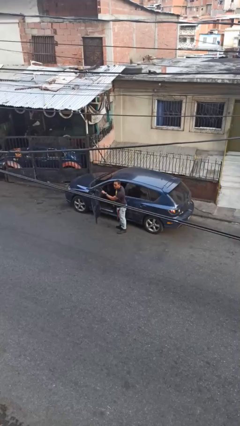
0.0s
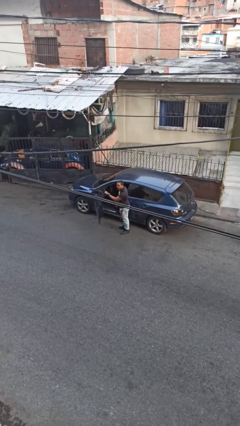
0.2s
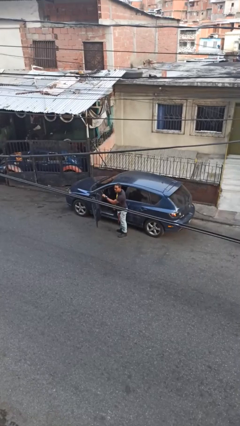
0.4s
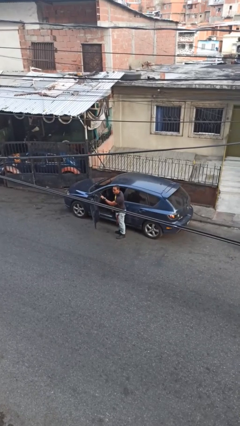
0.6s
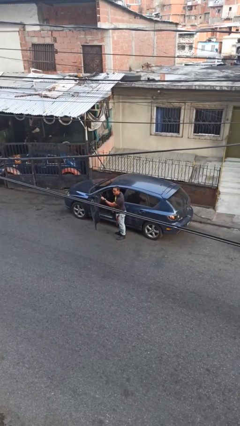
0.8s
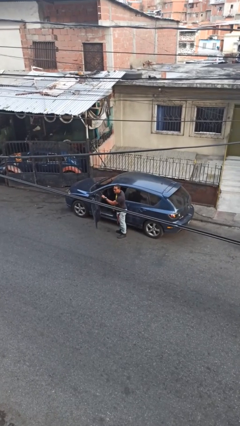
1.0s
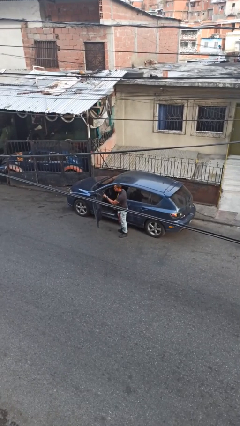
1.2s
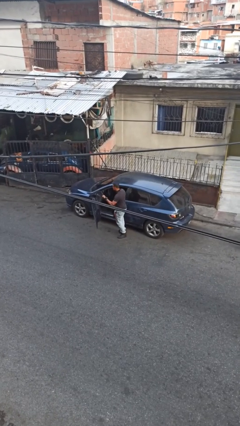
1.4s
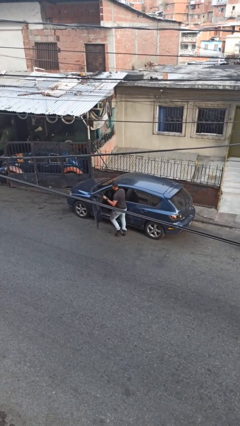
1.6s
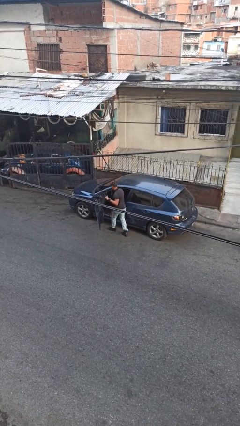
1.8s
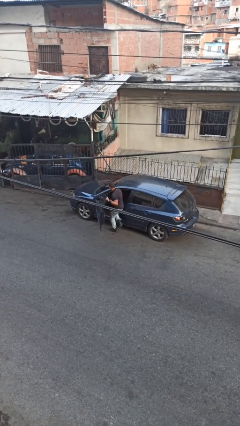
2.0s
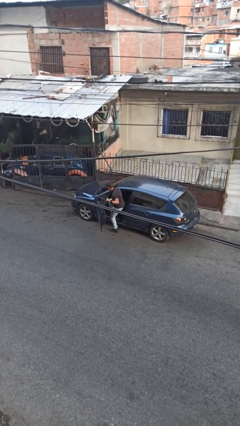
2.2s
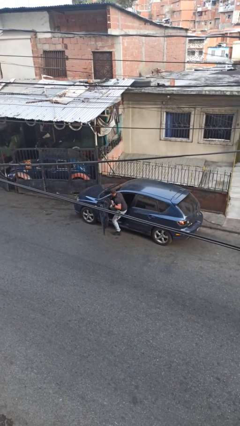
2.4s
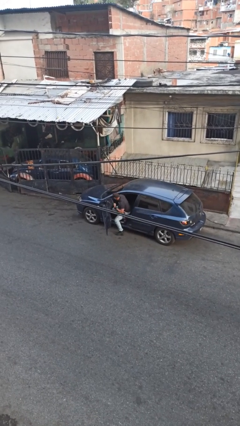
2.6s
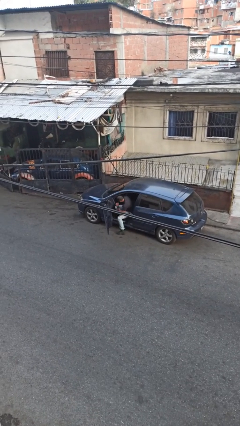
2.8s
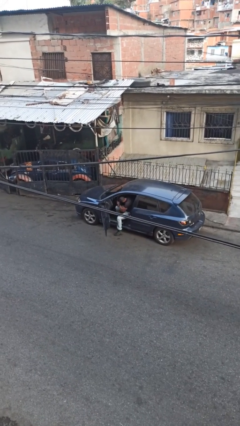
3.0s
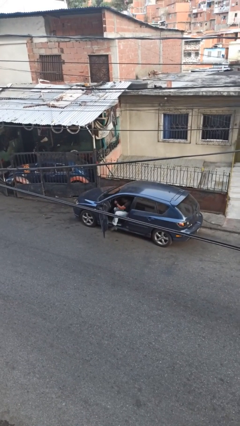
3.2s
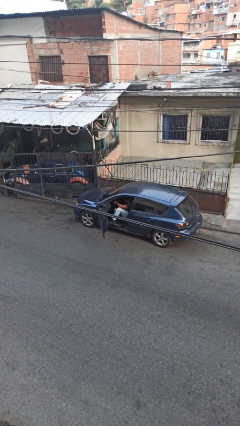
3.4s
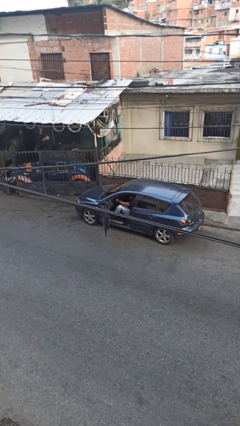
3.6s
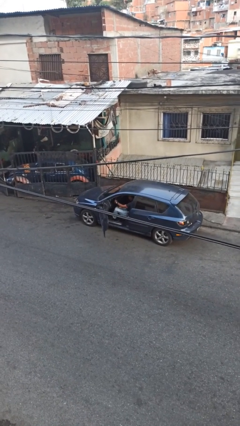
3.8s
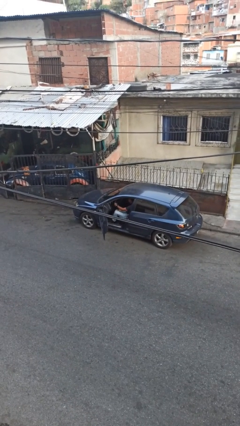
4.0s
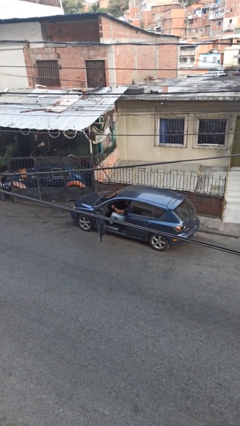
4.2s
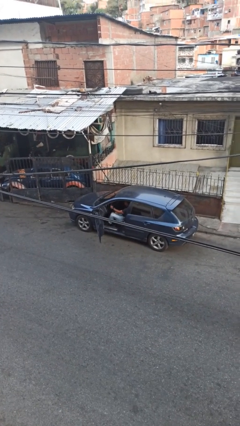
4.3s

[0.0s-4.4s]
person enters car

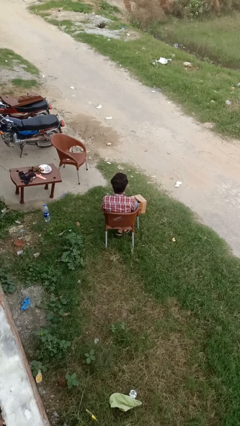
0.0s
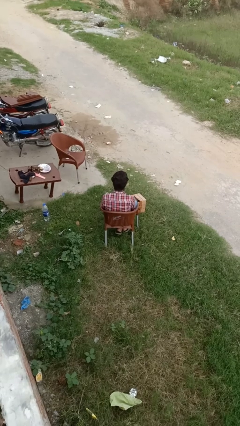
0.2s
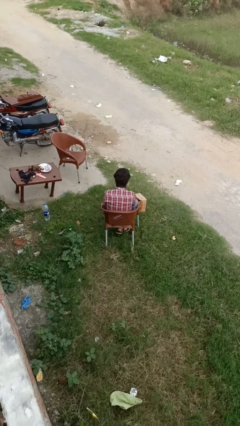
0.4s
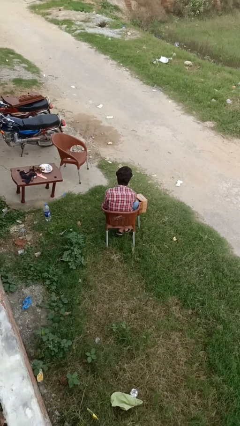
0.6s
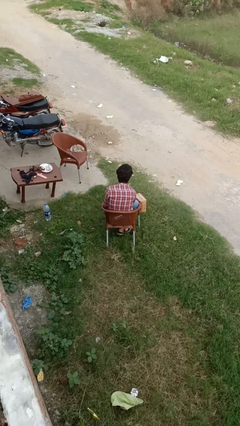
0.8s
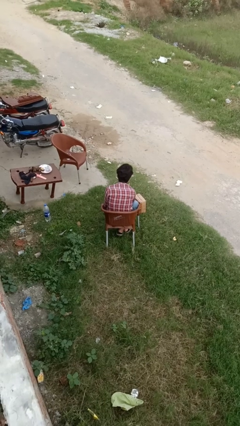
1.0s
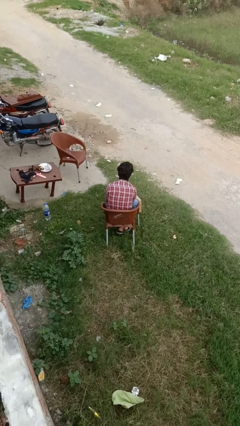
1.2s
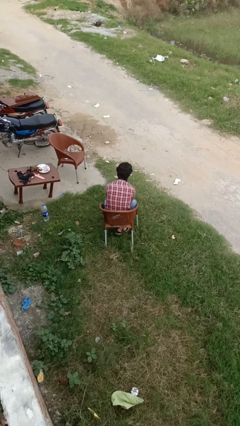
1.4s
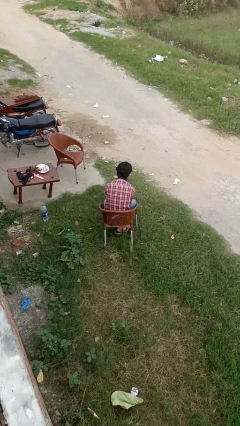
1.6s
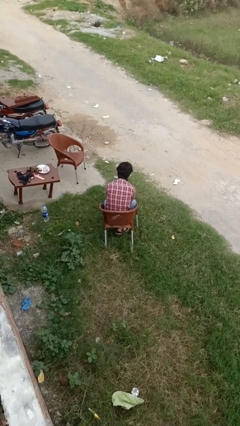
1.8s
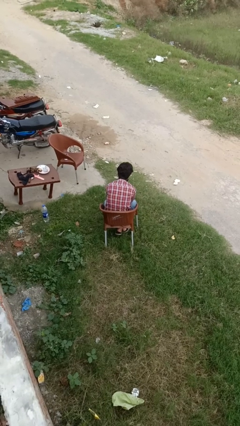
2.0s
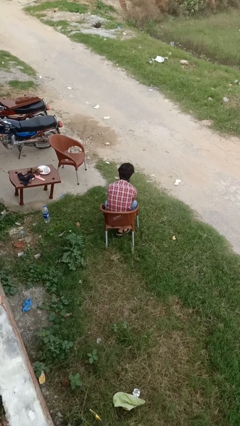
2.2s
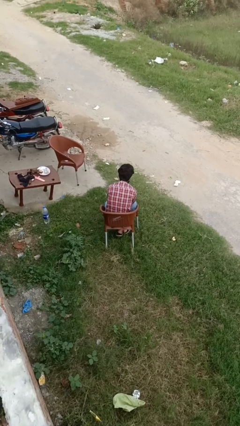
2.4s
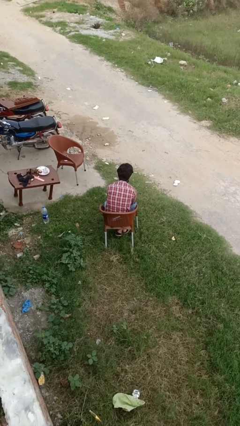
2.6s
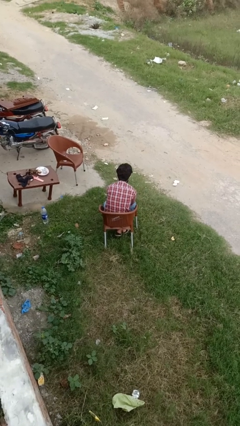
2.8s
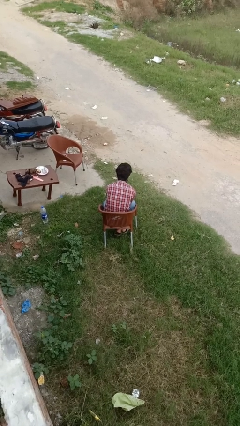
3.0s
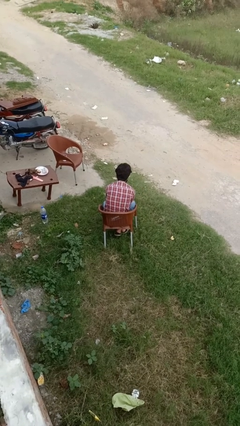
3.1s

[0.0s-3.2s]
person opens mailbox

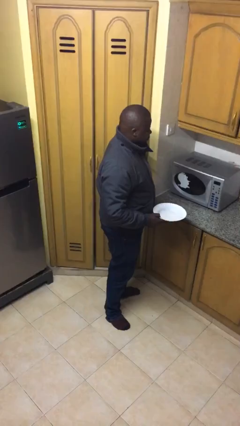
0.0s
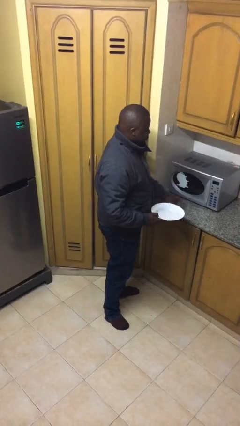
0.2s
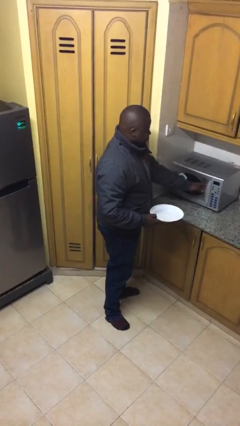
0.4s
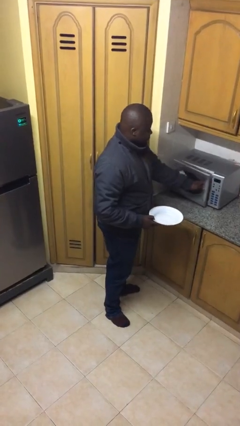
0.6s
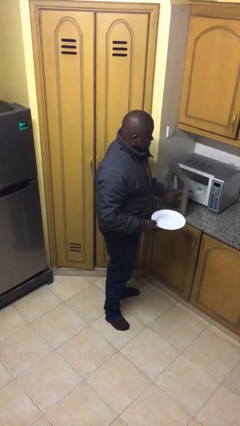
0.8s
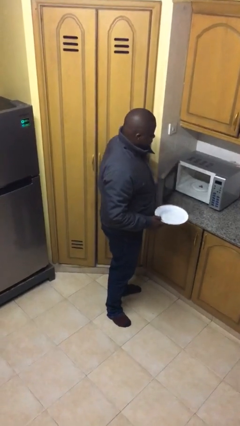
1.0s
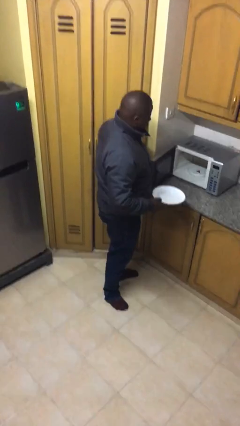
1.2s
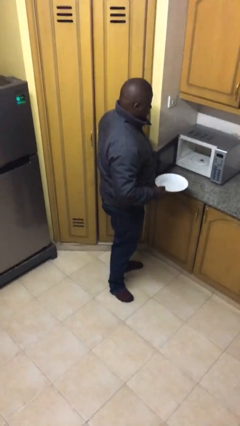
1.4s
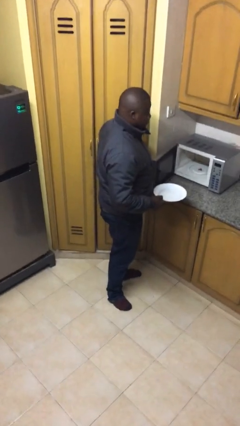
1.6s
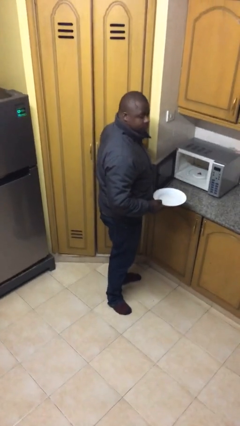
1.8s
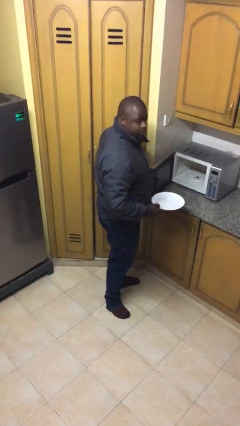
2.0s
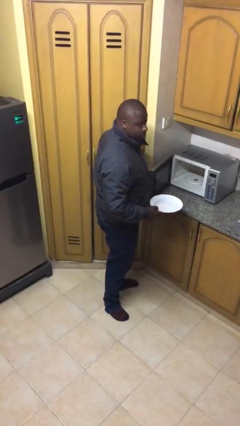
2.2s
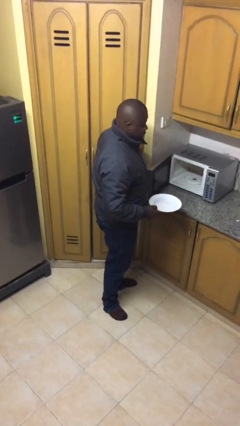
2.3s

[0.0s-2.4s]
person opens microwave

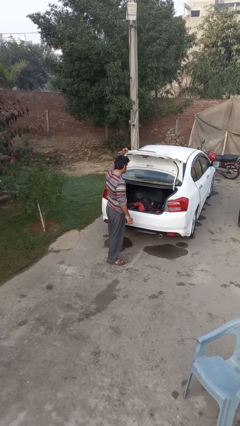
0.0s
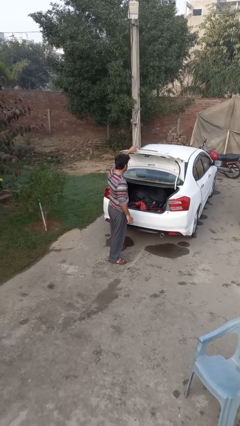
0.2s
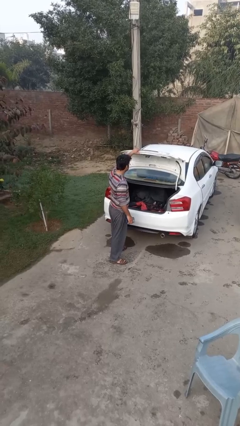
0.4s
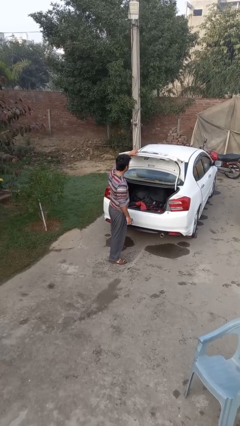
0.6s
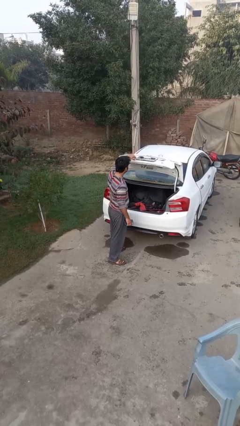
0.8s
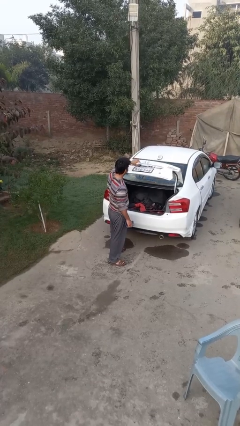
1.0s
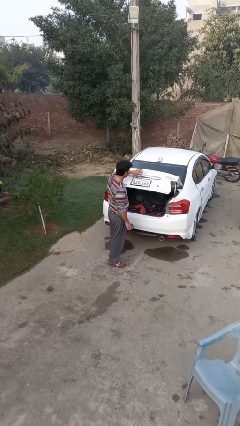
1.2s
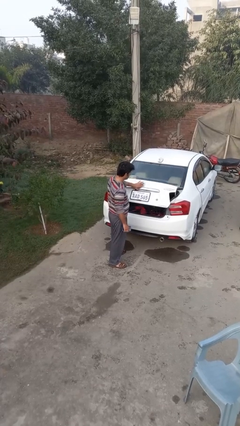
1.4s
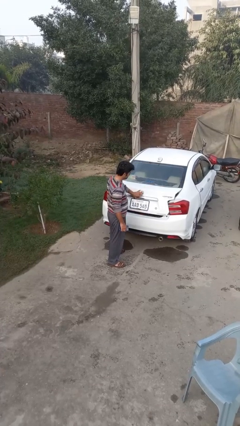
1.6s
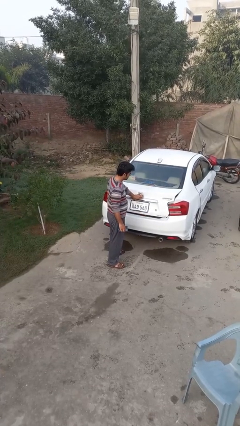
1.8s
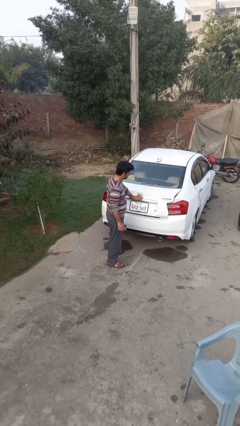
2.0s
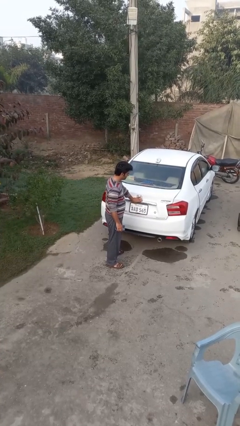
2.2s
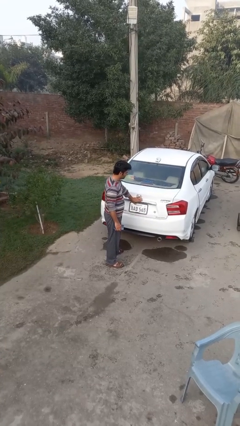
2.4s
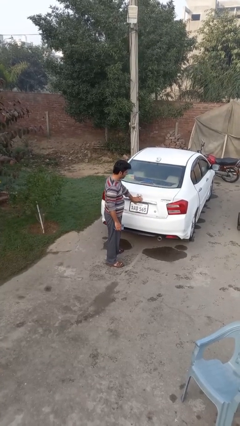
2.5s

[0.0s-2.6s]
person closes car trunk

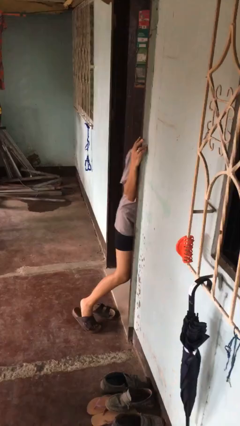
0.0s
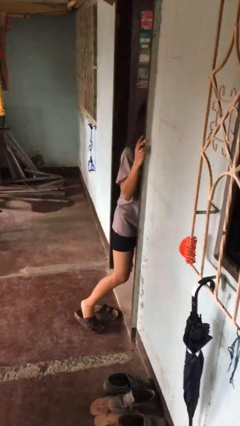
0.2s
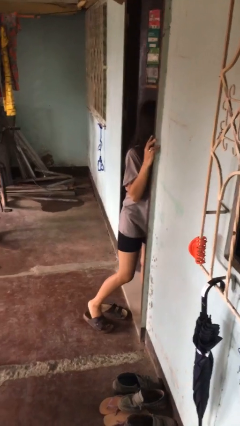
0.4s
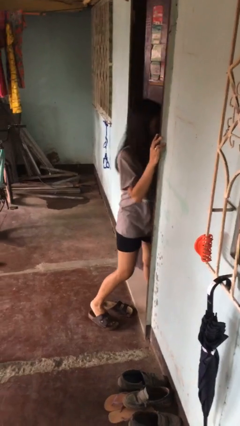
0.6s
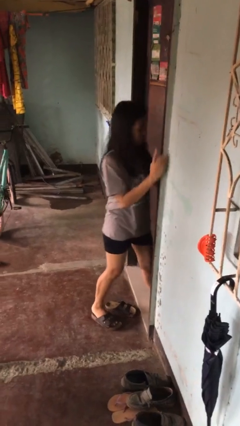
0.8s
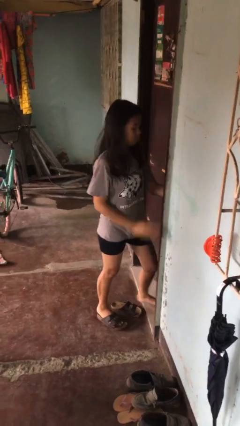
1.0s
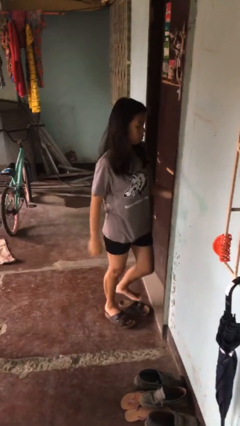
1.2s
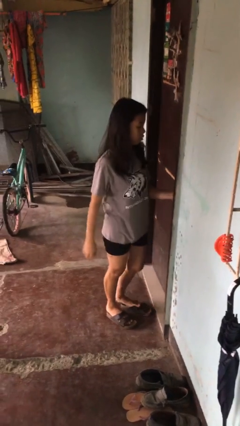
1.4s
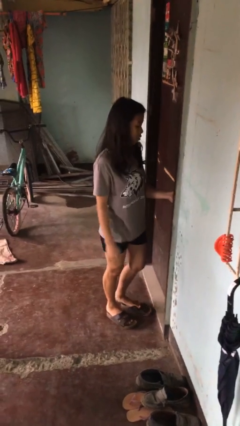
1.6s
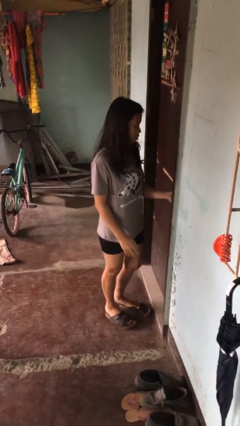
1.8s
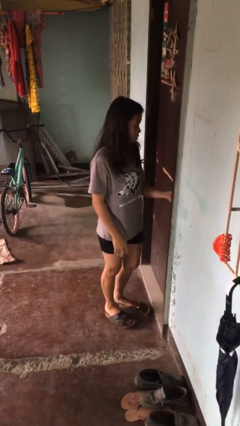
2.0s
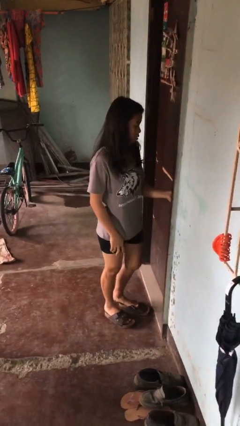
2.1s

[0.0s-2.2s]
person closes facility door

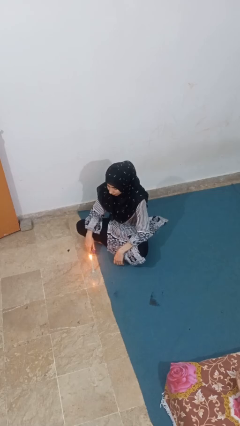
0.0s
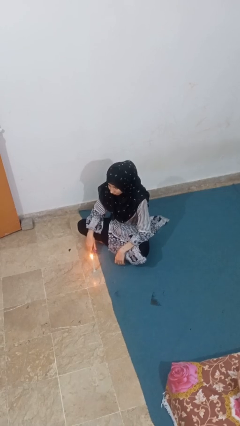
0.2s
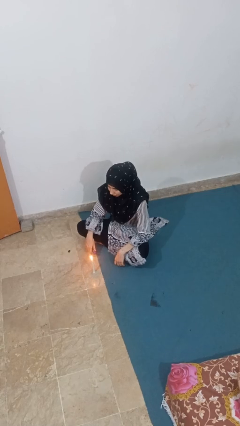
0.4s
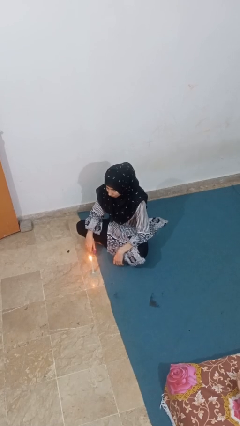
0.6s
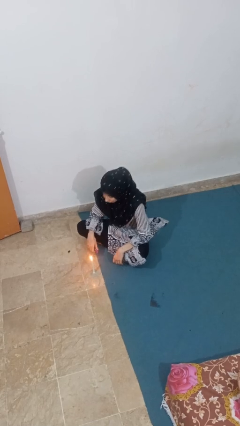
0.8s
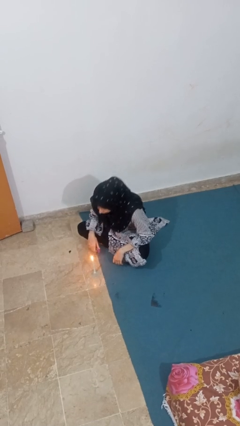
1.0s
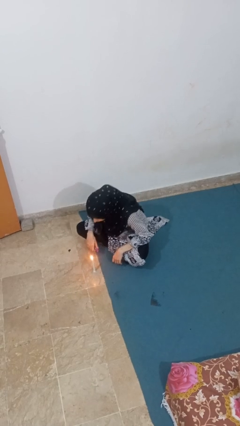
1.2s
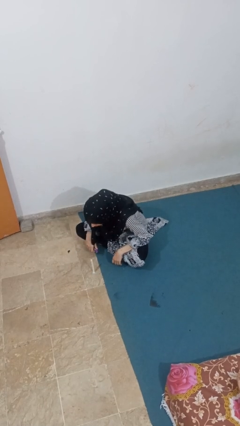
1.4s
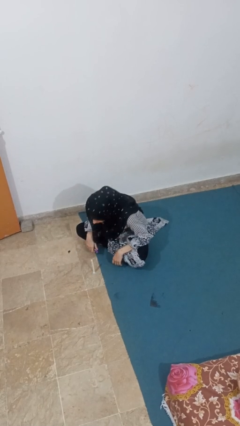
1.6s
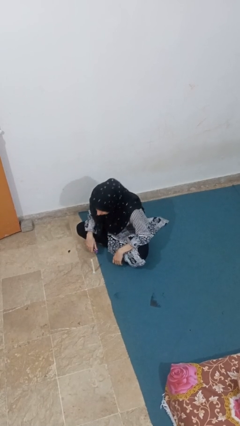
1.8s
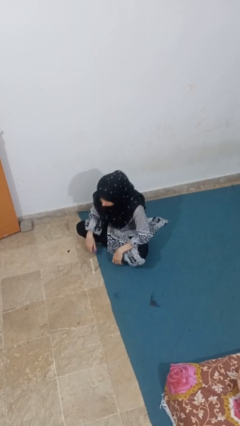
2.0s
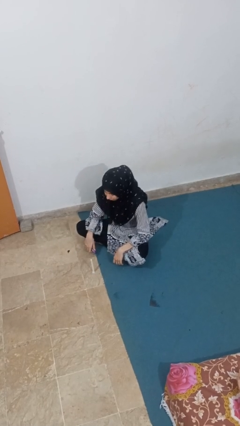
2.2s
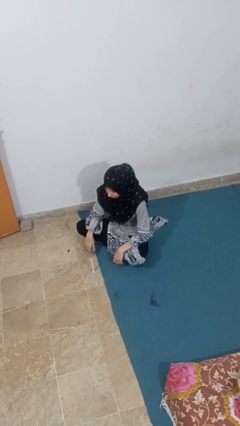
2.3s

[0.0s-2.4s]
person extinguishes candle

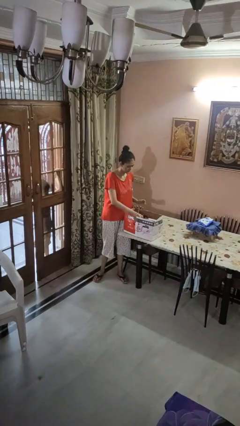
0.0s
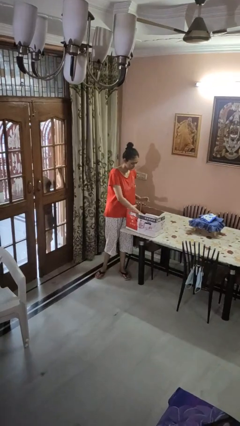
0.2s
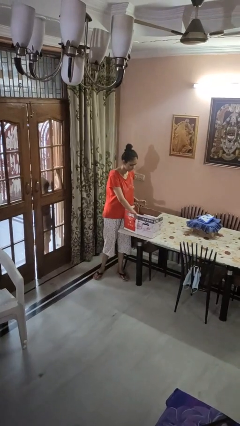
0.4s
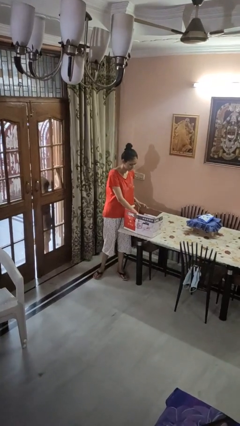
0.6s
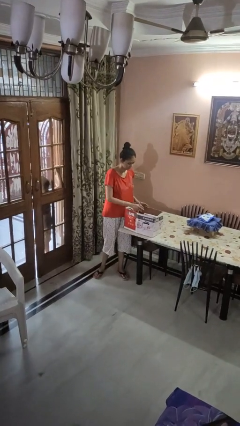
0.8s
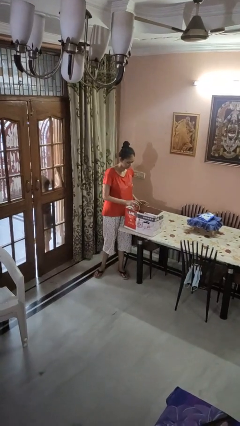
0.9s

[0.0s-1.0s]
person puts object into box
